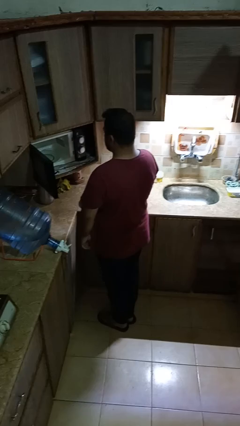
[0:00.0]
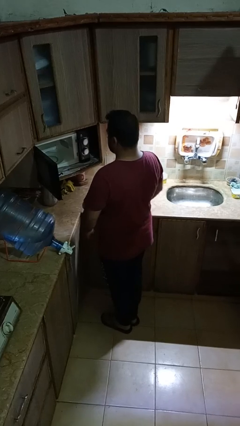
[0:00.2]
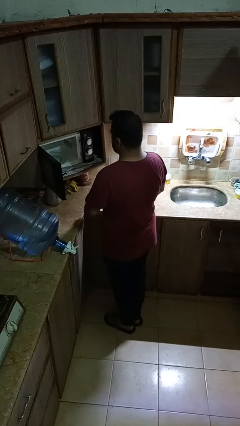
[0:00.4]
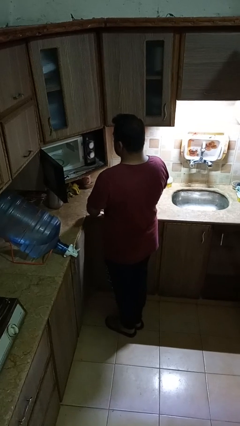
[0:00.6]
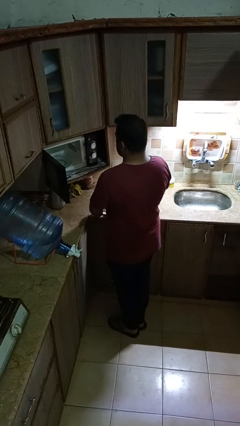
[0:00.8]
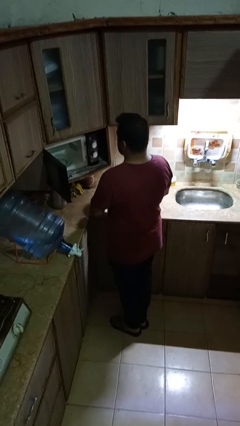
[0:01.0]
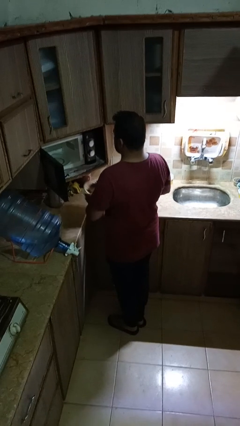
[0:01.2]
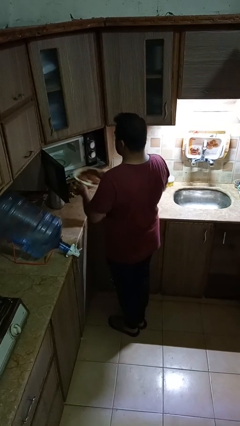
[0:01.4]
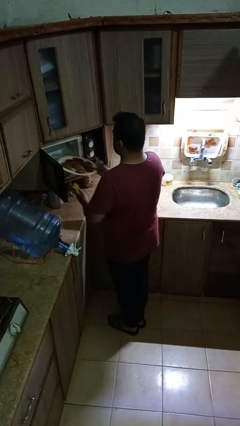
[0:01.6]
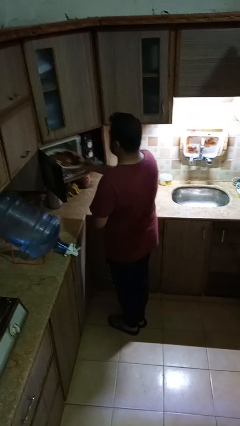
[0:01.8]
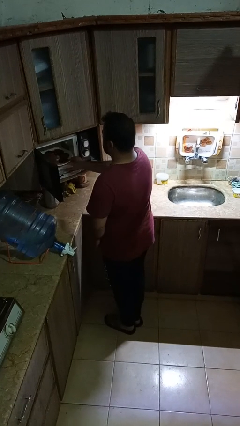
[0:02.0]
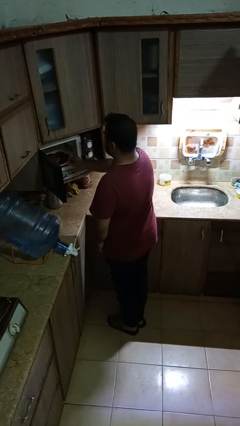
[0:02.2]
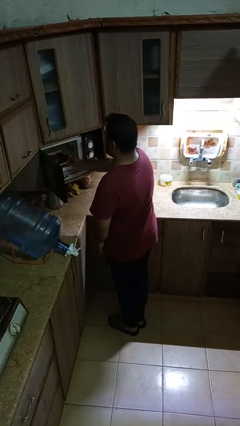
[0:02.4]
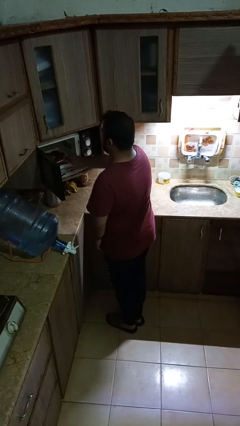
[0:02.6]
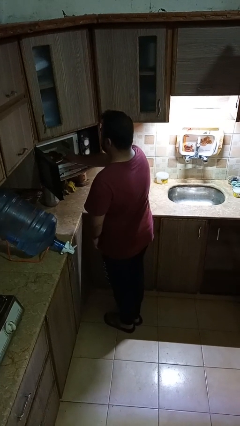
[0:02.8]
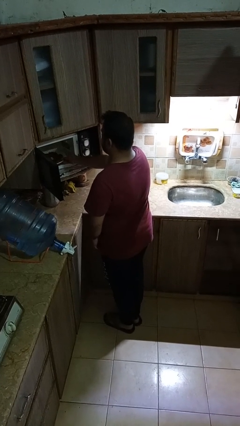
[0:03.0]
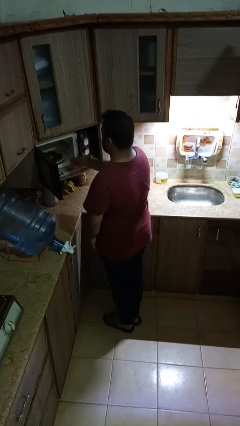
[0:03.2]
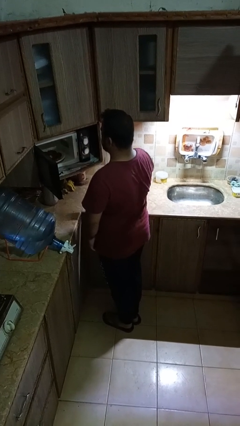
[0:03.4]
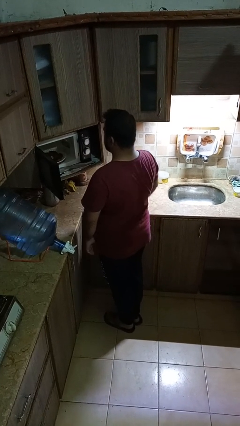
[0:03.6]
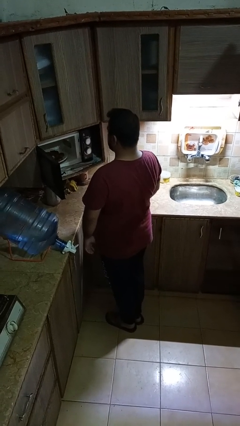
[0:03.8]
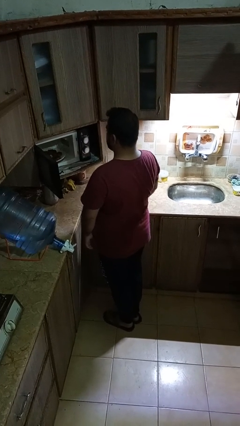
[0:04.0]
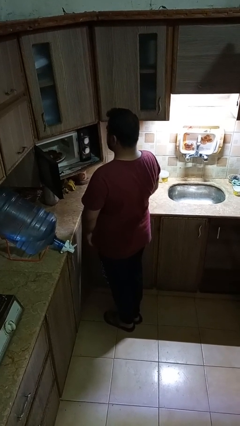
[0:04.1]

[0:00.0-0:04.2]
person puts object into microwave

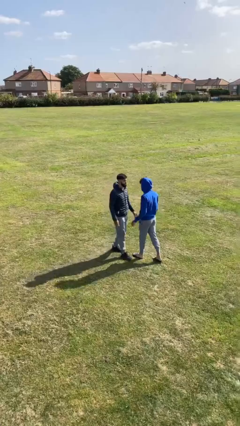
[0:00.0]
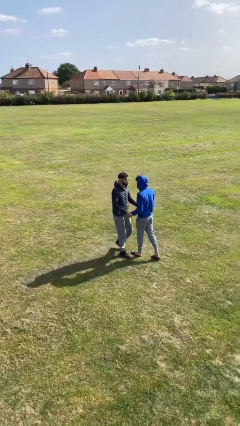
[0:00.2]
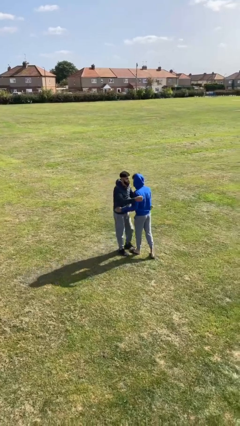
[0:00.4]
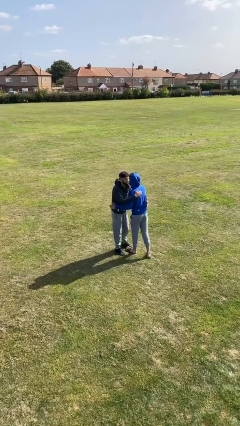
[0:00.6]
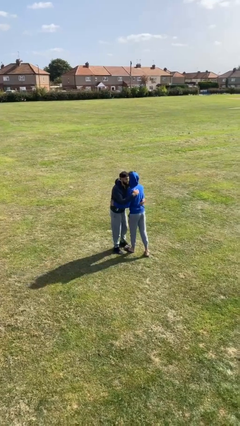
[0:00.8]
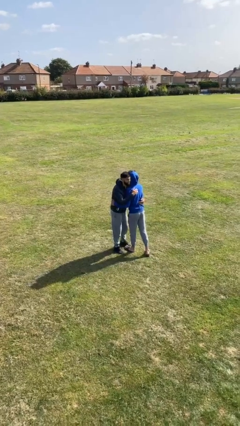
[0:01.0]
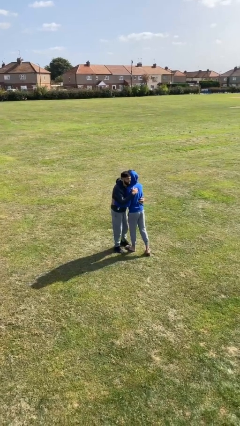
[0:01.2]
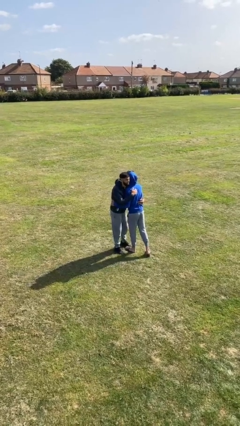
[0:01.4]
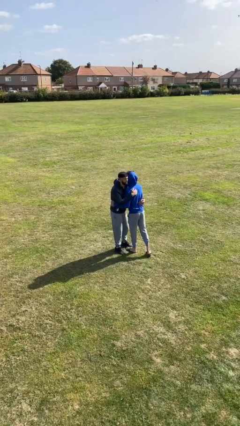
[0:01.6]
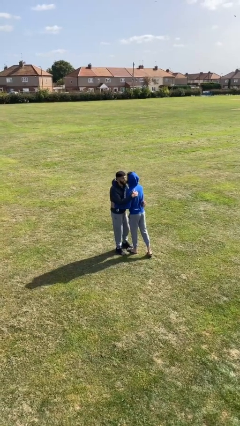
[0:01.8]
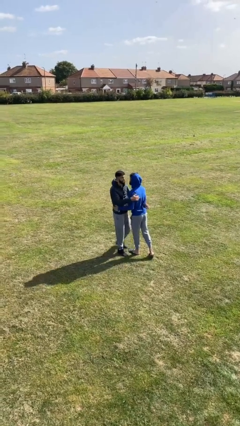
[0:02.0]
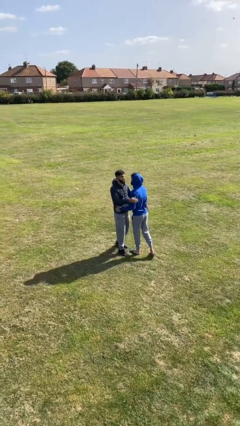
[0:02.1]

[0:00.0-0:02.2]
person embraces person

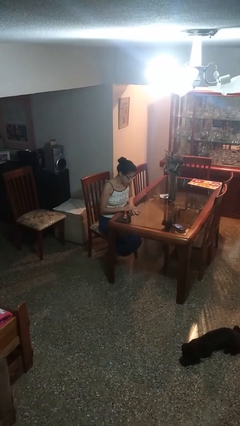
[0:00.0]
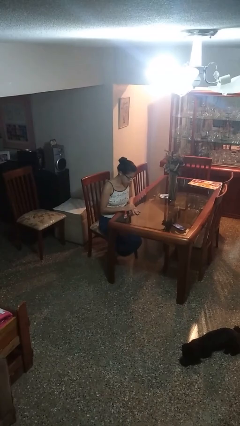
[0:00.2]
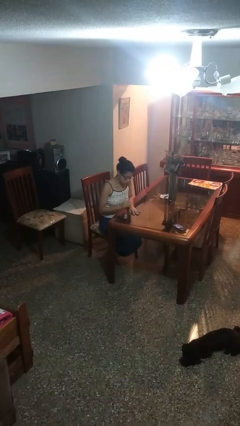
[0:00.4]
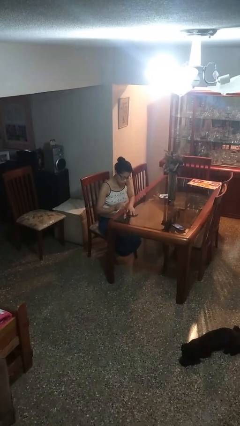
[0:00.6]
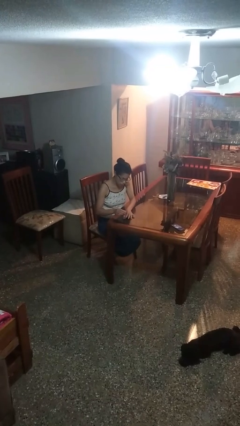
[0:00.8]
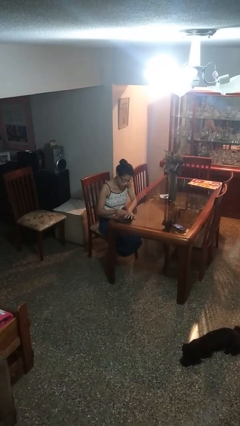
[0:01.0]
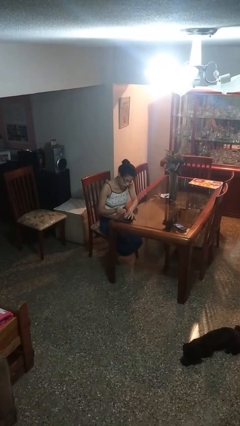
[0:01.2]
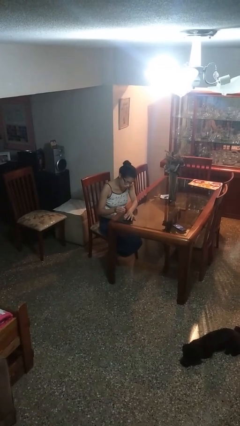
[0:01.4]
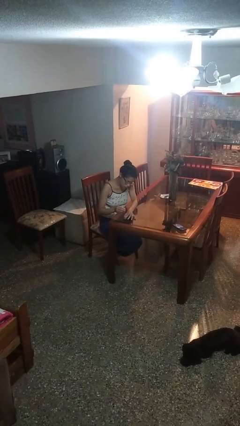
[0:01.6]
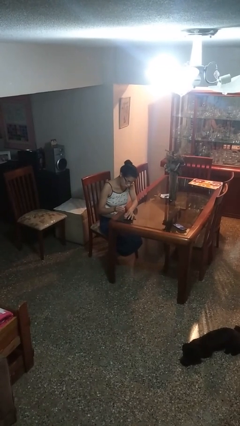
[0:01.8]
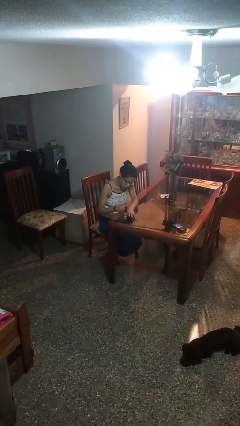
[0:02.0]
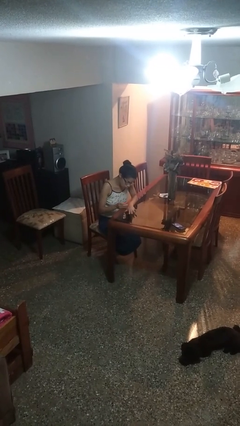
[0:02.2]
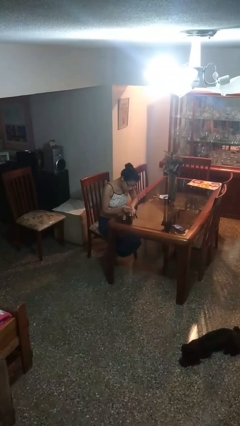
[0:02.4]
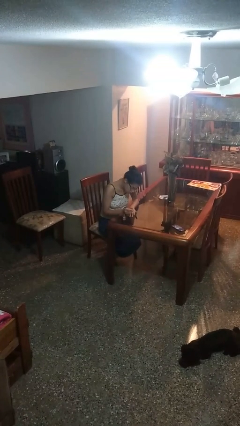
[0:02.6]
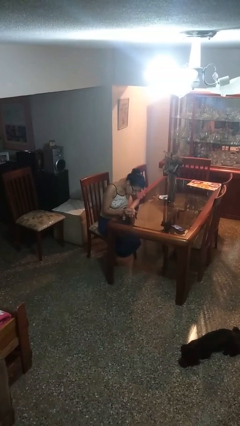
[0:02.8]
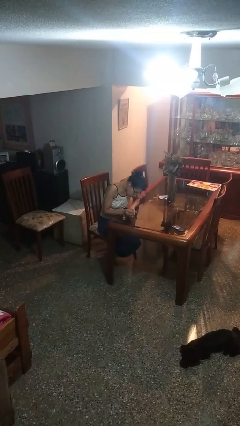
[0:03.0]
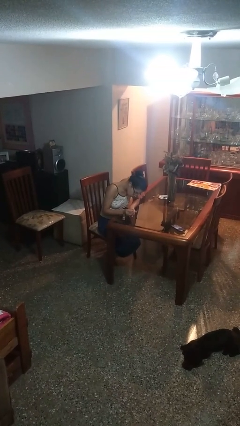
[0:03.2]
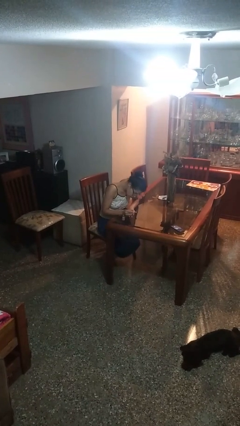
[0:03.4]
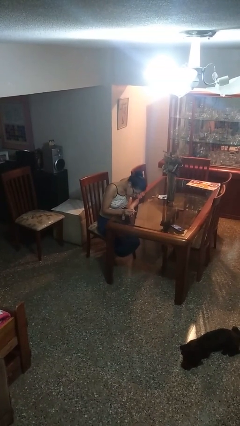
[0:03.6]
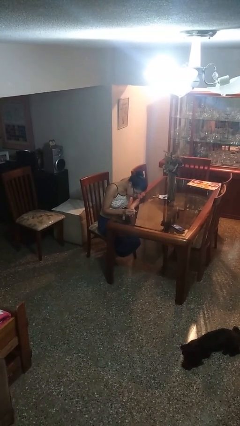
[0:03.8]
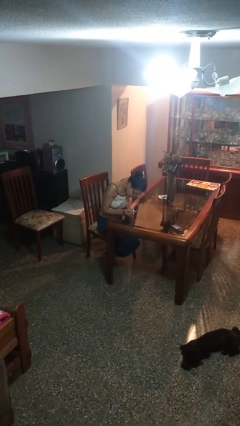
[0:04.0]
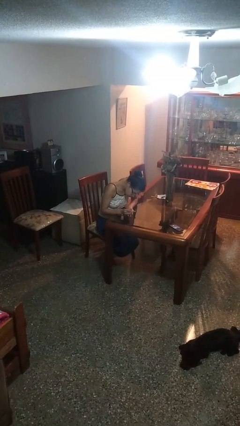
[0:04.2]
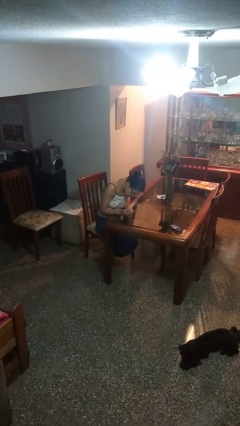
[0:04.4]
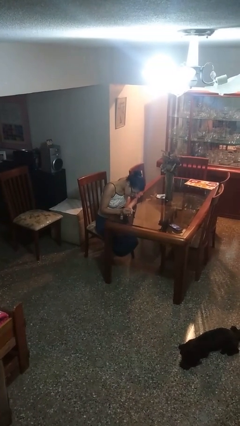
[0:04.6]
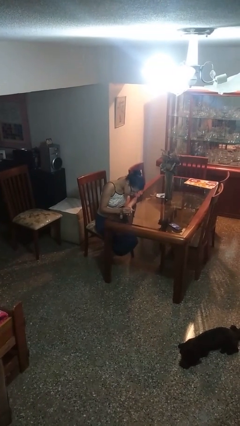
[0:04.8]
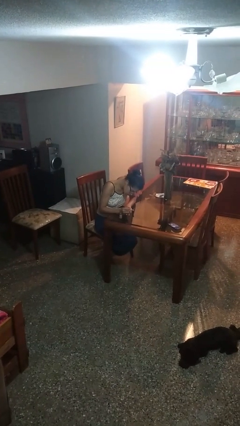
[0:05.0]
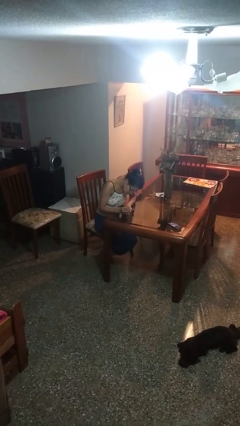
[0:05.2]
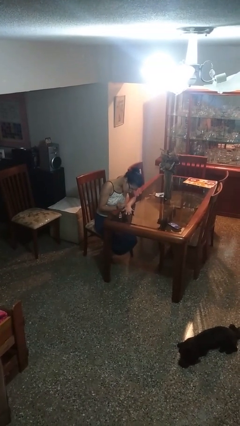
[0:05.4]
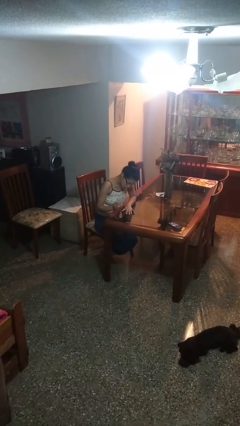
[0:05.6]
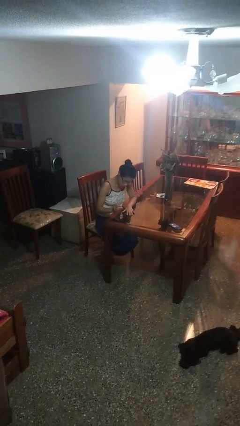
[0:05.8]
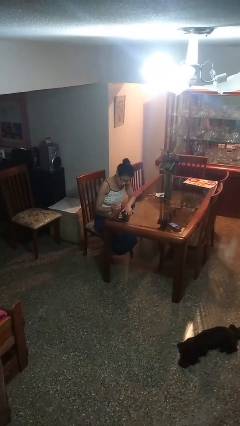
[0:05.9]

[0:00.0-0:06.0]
person paints fingernails

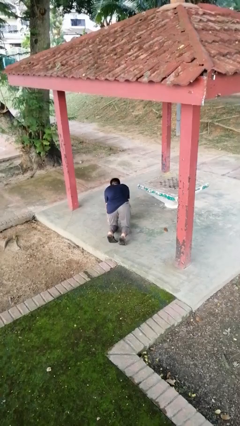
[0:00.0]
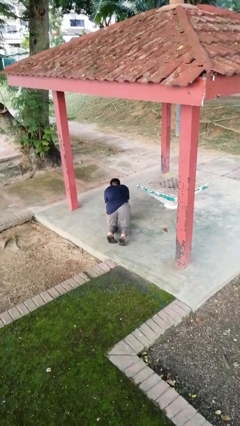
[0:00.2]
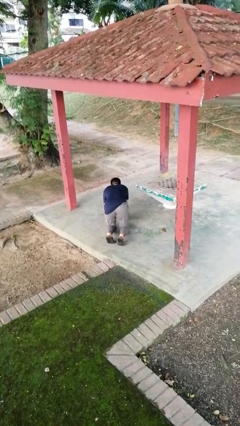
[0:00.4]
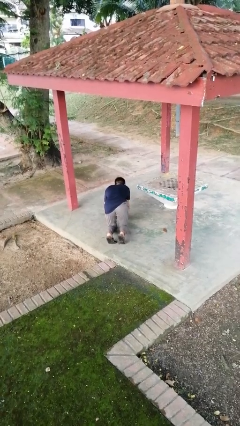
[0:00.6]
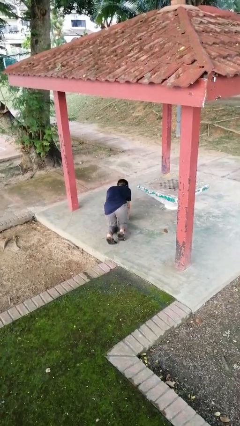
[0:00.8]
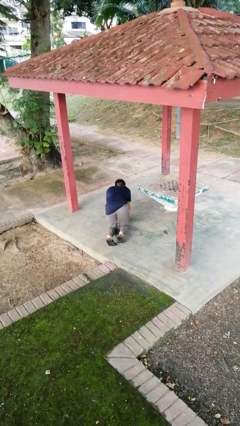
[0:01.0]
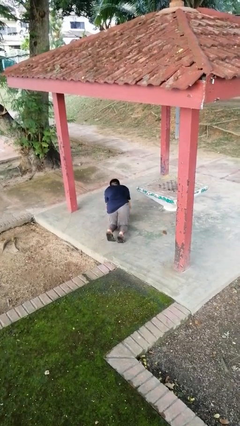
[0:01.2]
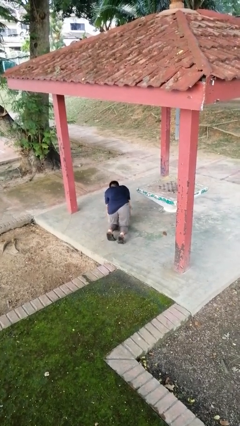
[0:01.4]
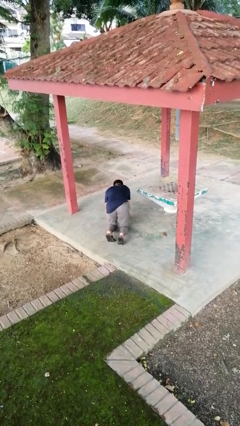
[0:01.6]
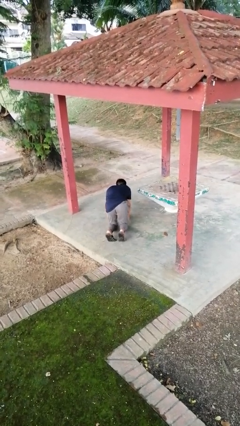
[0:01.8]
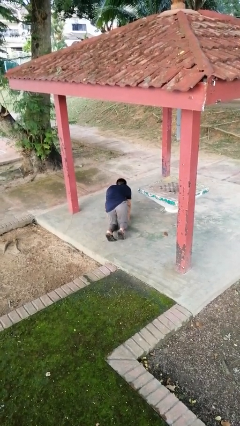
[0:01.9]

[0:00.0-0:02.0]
person crawls

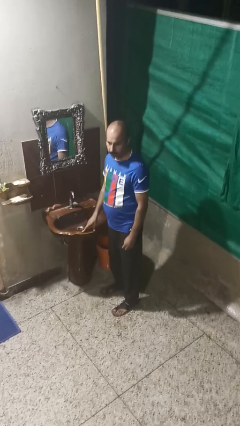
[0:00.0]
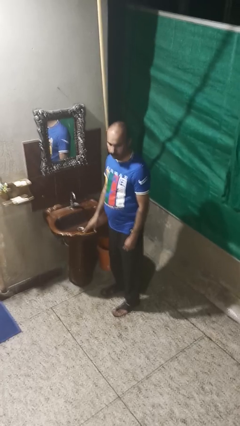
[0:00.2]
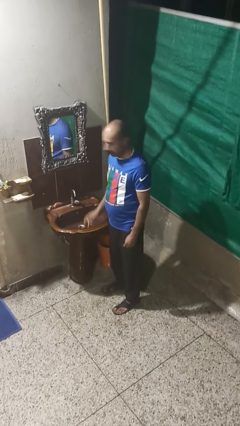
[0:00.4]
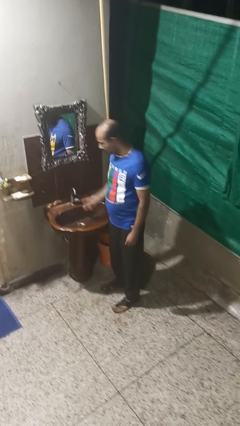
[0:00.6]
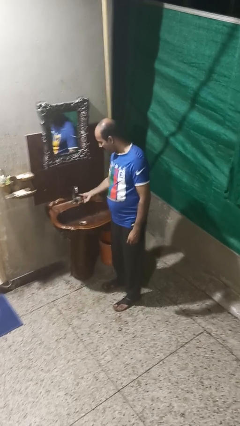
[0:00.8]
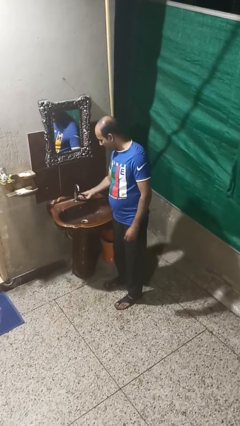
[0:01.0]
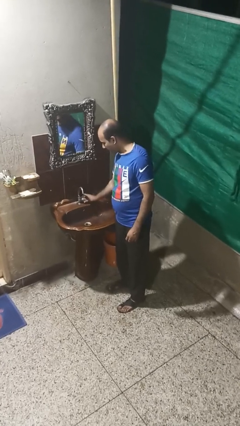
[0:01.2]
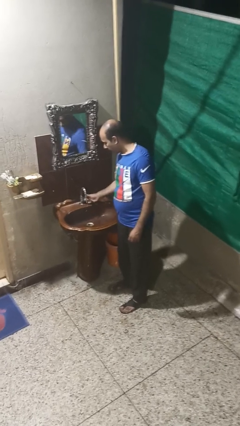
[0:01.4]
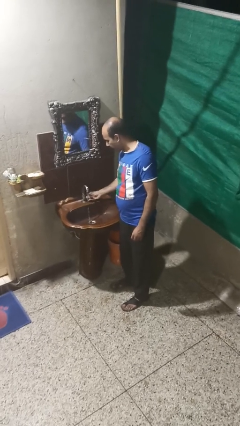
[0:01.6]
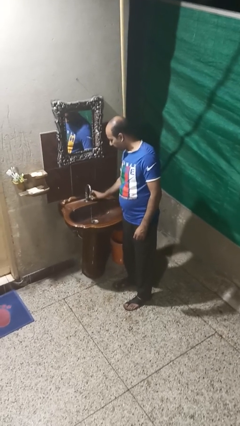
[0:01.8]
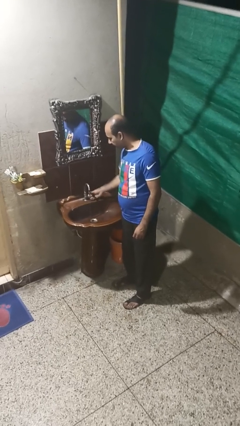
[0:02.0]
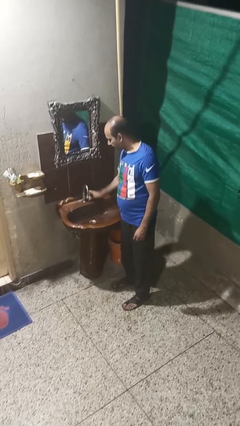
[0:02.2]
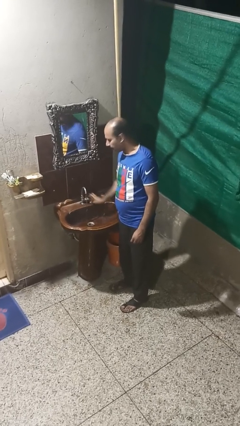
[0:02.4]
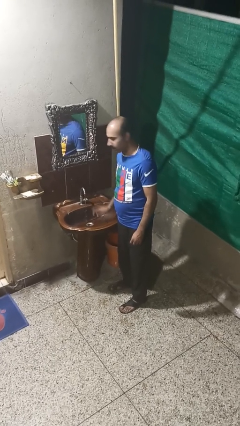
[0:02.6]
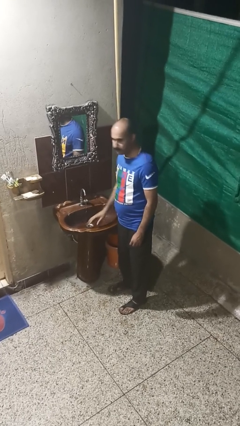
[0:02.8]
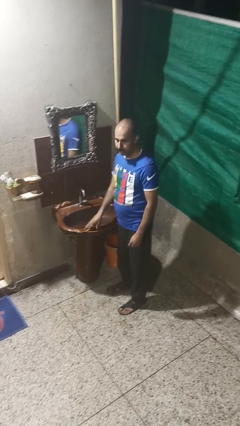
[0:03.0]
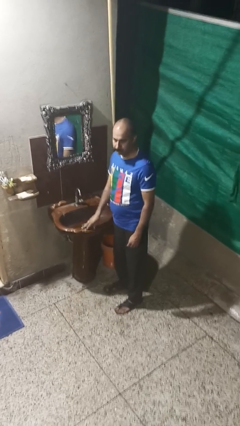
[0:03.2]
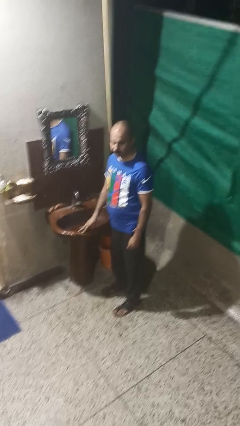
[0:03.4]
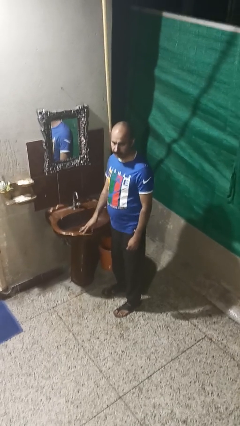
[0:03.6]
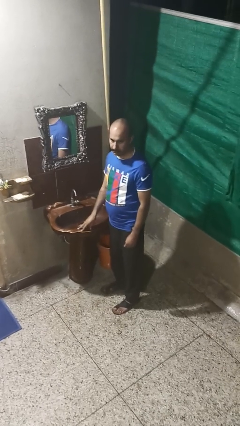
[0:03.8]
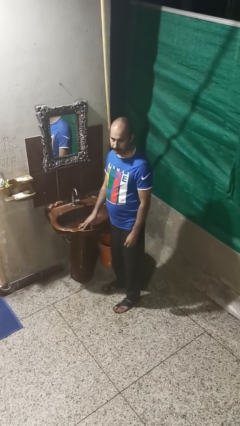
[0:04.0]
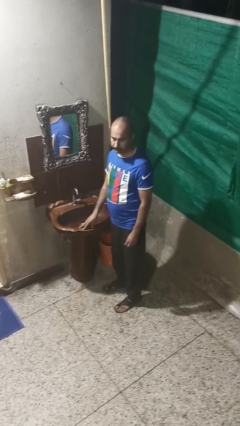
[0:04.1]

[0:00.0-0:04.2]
person turns on faucet
